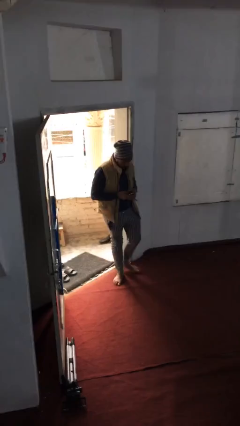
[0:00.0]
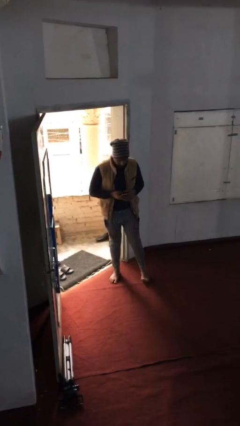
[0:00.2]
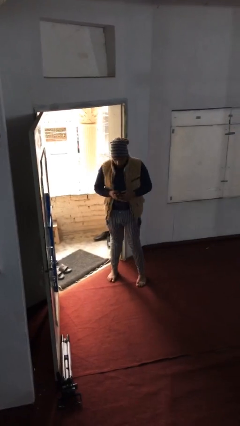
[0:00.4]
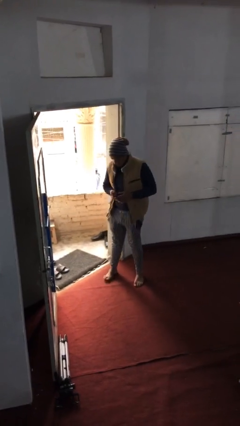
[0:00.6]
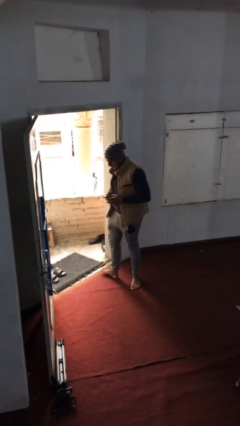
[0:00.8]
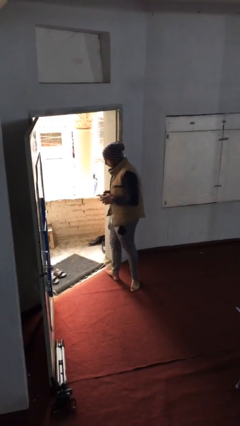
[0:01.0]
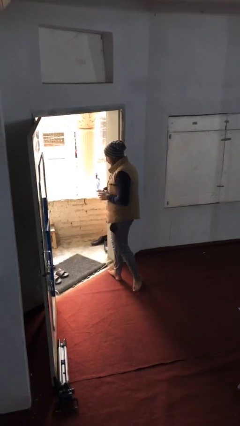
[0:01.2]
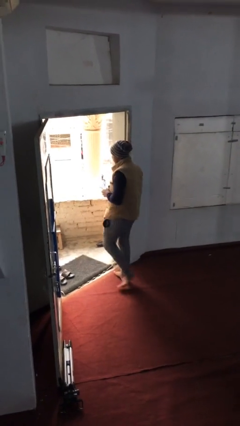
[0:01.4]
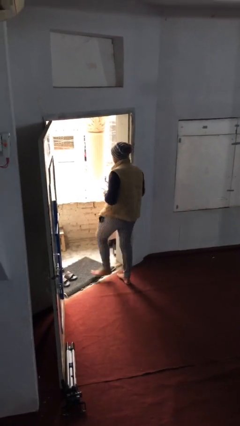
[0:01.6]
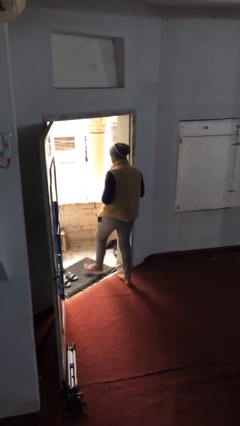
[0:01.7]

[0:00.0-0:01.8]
person exits scene through structure

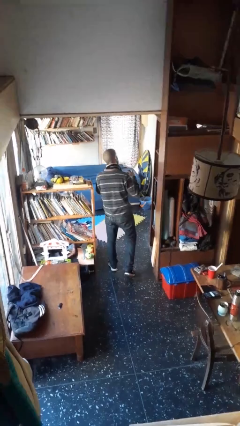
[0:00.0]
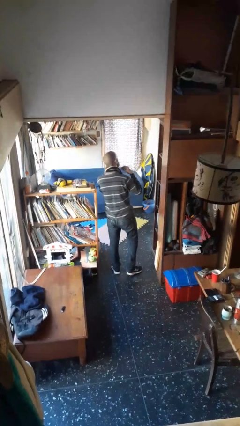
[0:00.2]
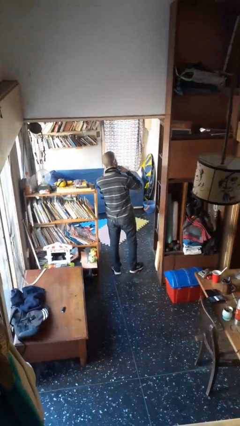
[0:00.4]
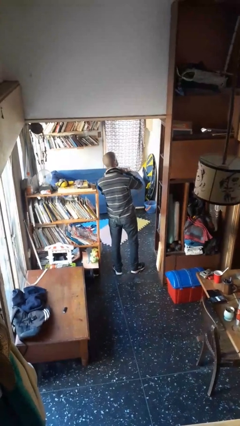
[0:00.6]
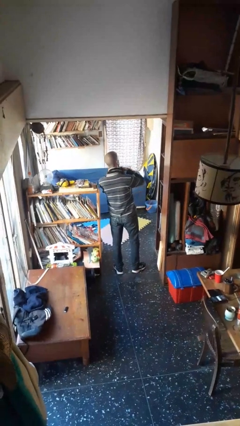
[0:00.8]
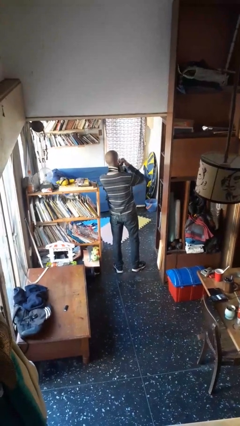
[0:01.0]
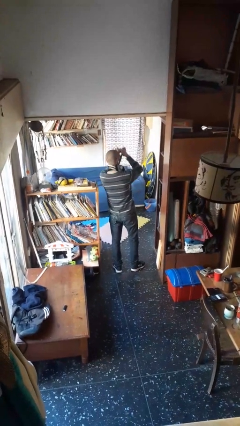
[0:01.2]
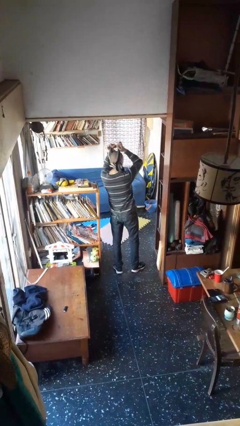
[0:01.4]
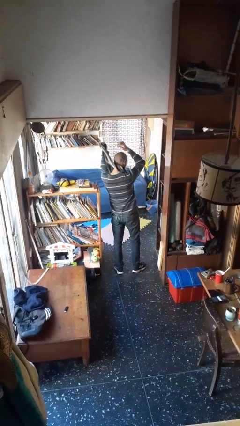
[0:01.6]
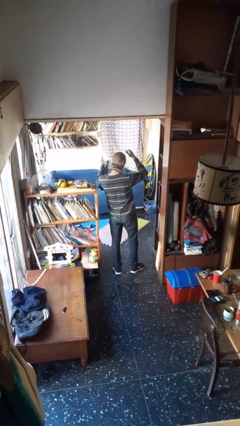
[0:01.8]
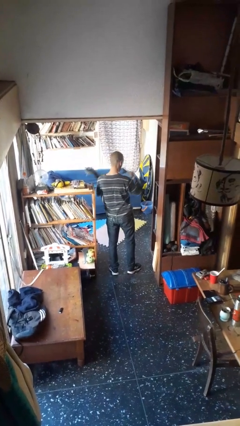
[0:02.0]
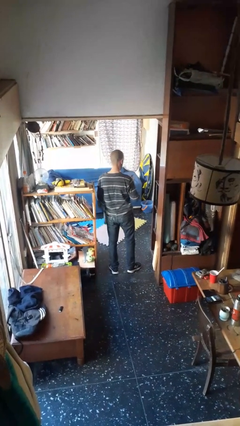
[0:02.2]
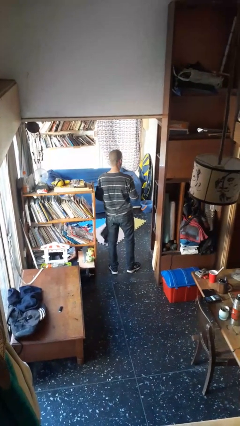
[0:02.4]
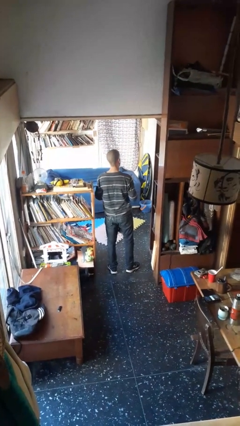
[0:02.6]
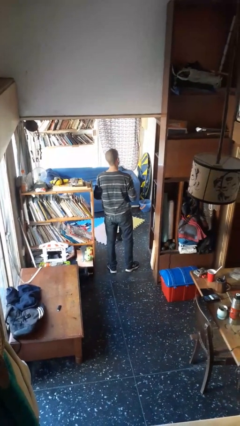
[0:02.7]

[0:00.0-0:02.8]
person takes off scarf

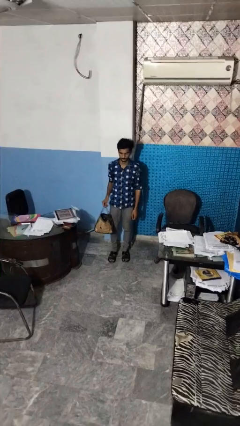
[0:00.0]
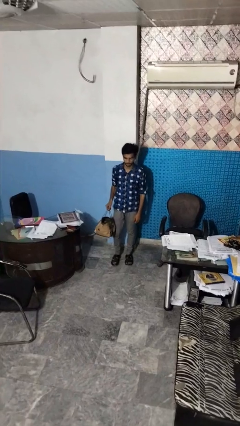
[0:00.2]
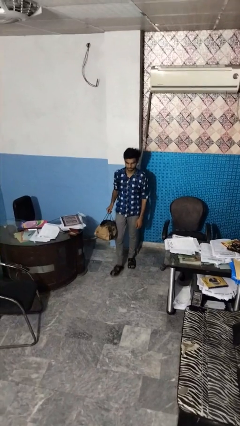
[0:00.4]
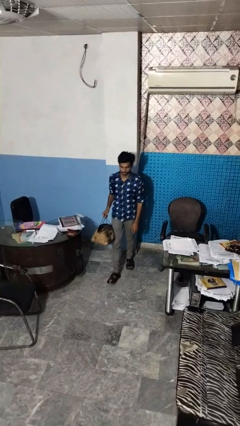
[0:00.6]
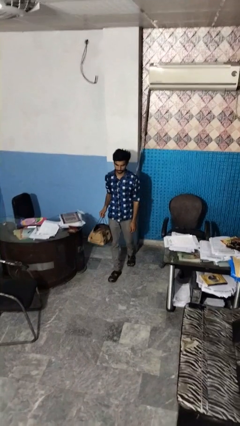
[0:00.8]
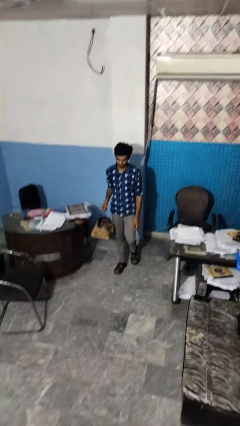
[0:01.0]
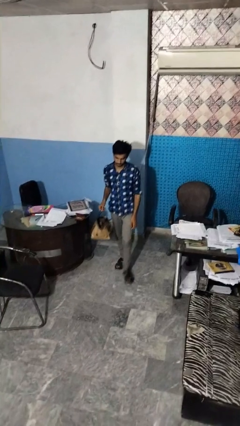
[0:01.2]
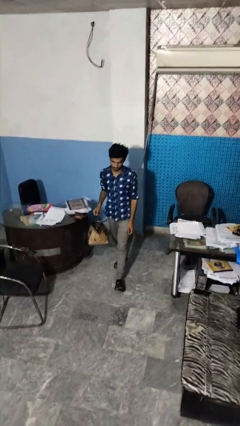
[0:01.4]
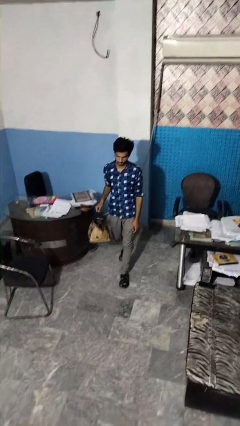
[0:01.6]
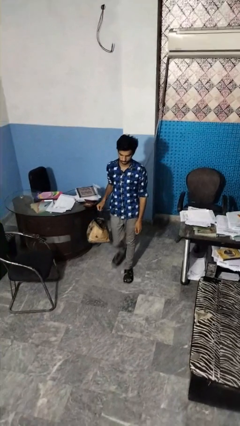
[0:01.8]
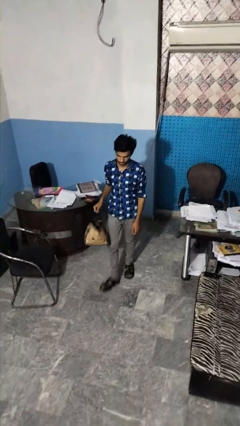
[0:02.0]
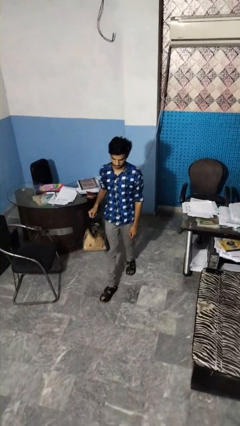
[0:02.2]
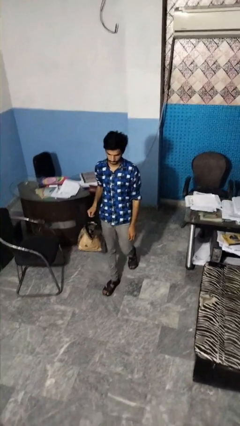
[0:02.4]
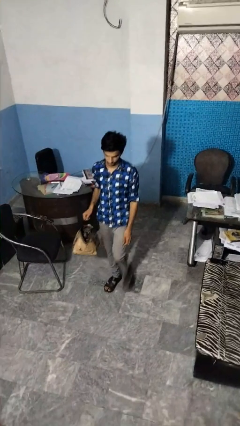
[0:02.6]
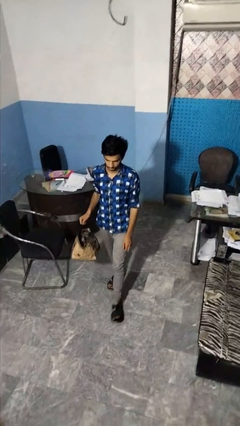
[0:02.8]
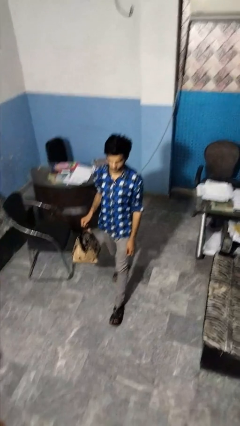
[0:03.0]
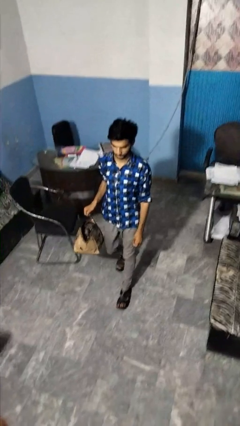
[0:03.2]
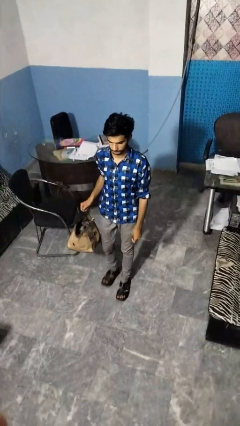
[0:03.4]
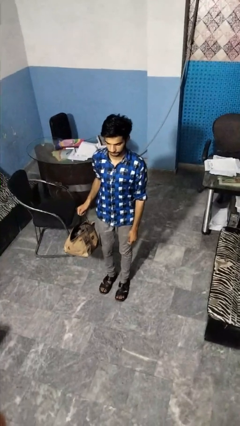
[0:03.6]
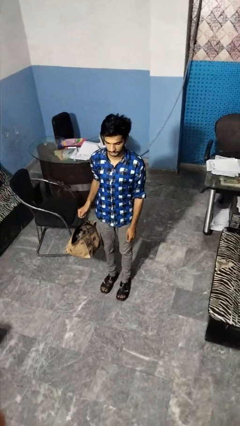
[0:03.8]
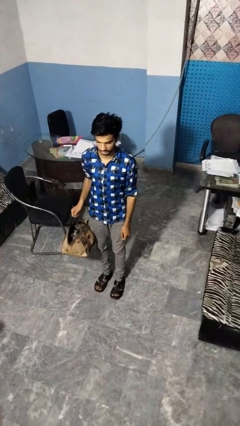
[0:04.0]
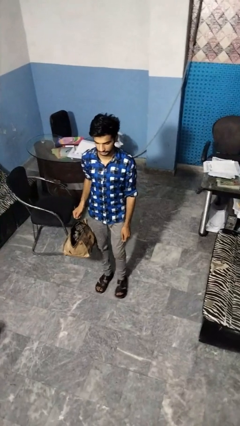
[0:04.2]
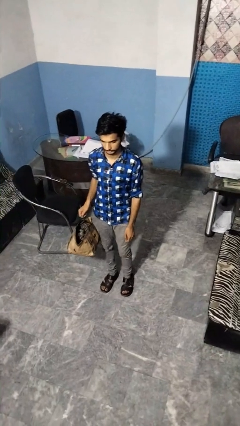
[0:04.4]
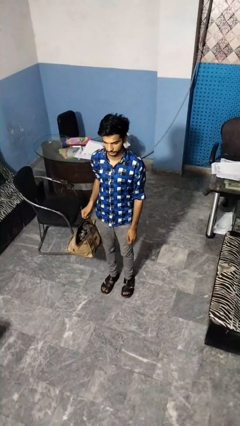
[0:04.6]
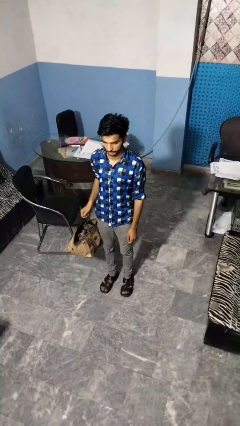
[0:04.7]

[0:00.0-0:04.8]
person carries groceries

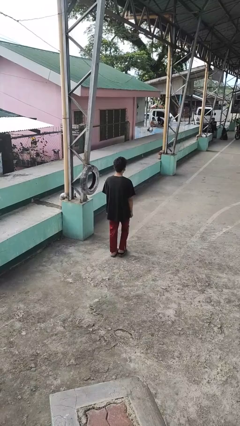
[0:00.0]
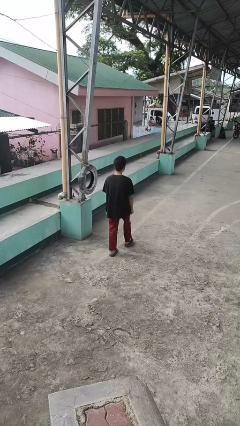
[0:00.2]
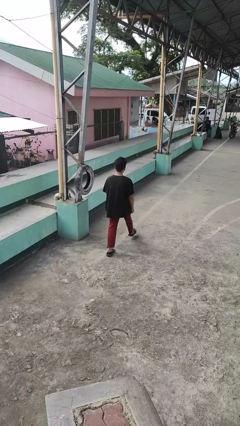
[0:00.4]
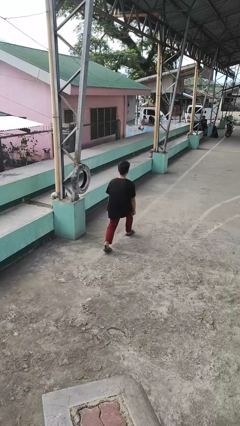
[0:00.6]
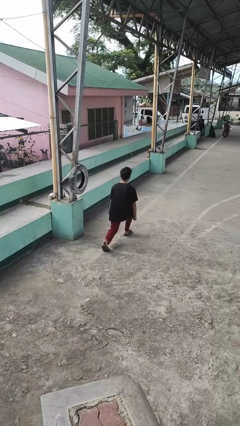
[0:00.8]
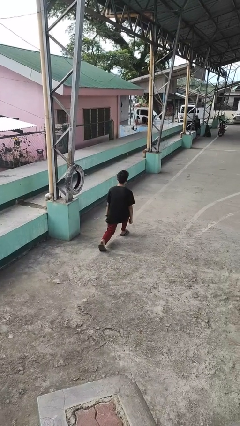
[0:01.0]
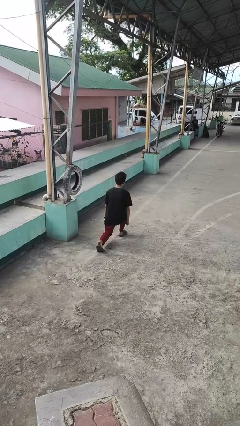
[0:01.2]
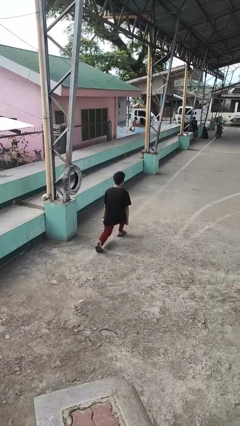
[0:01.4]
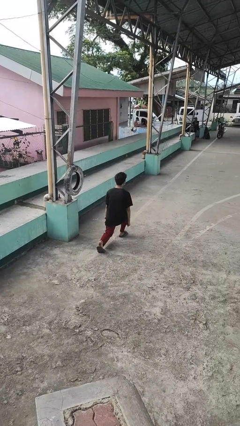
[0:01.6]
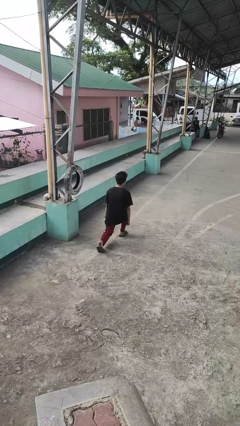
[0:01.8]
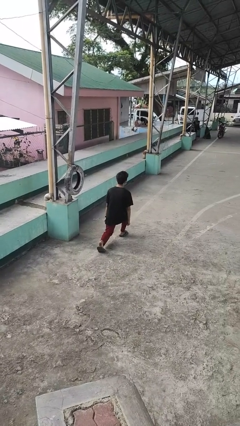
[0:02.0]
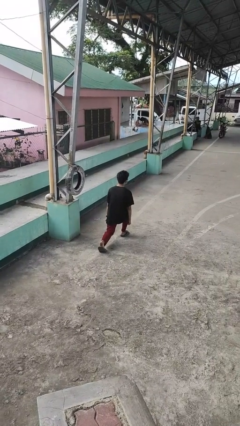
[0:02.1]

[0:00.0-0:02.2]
person exercises with lunges

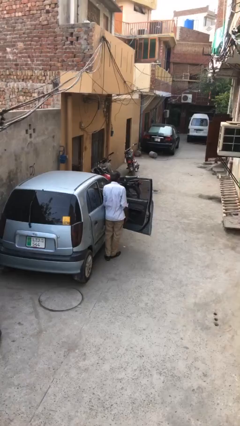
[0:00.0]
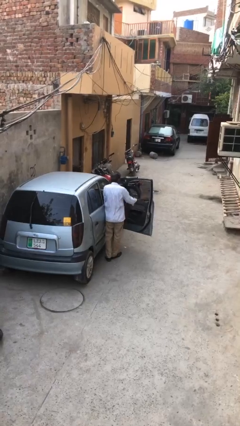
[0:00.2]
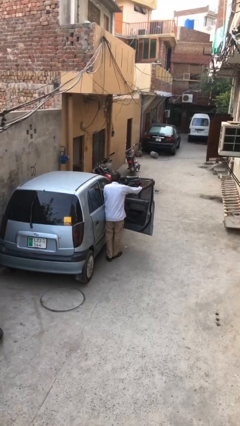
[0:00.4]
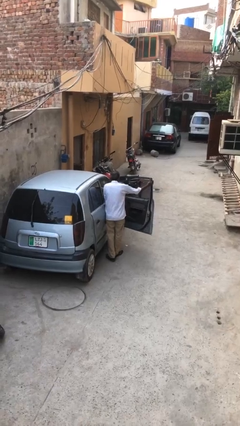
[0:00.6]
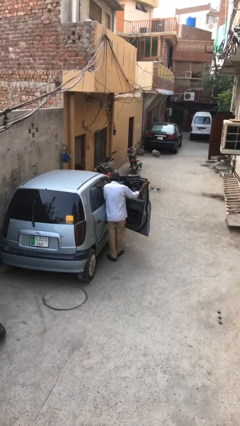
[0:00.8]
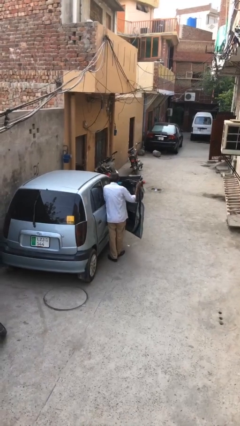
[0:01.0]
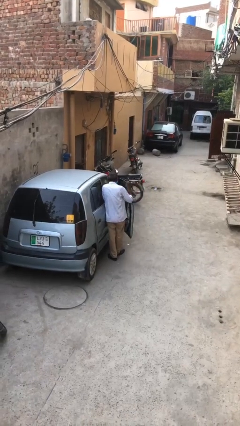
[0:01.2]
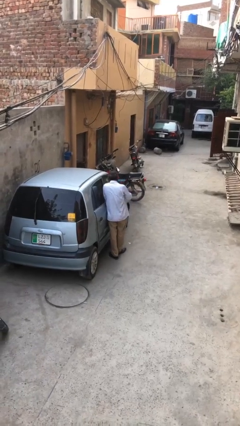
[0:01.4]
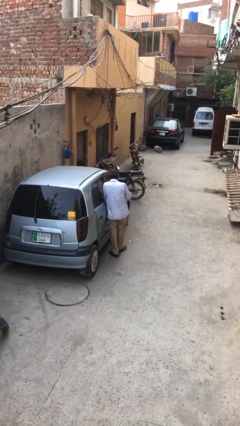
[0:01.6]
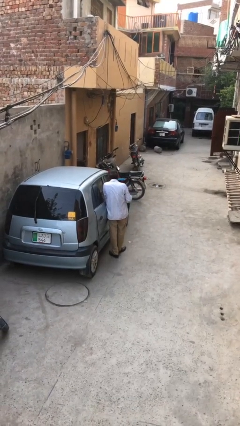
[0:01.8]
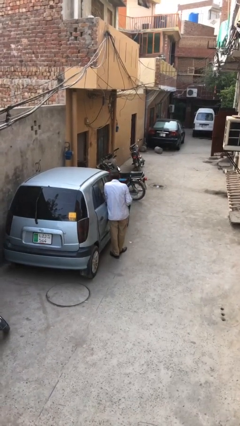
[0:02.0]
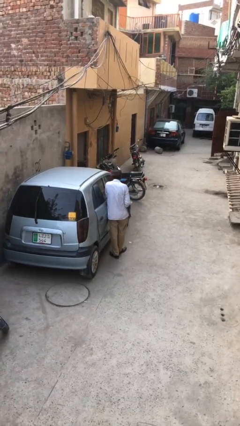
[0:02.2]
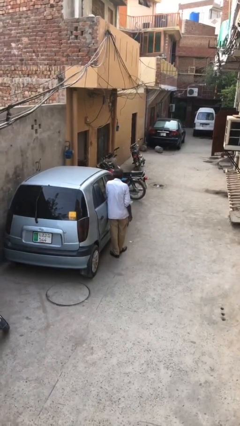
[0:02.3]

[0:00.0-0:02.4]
person closes car door

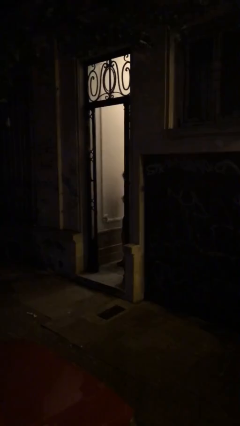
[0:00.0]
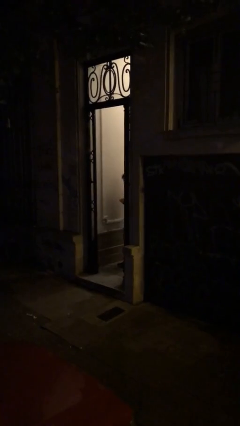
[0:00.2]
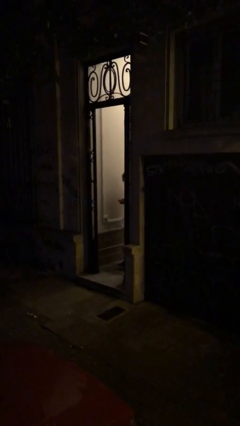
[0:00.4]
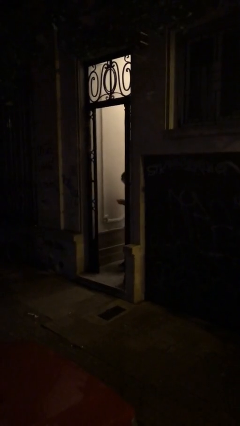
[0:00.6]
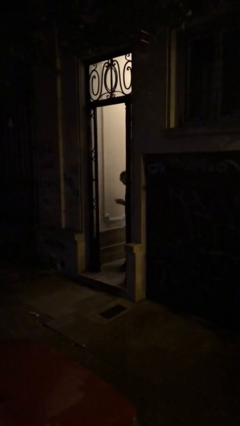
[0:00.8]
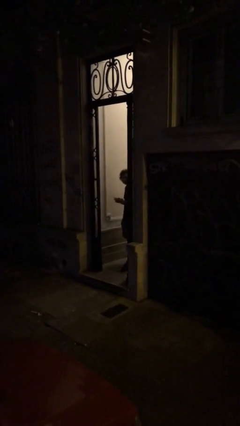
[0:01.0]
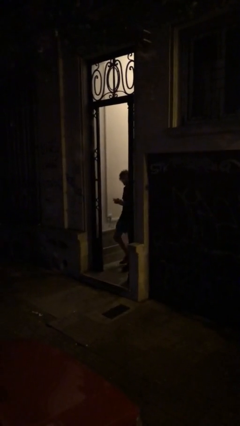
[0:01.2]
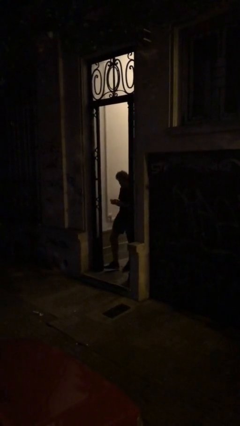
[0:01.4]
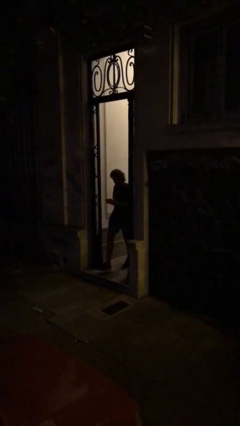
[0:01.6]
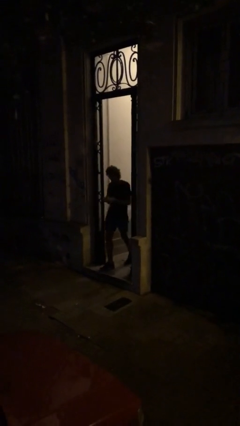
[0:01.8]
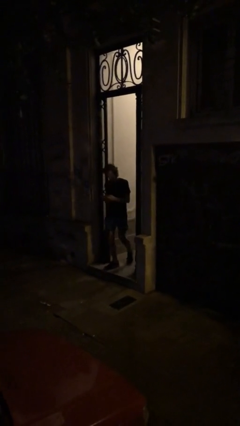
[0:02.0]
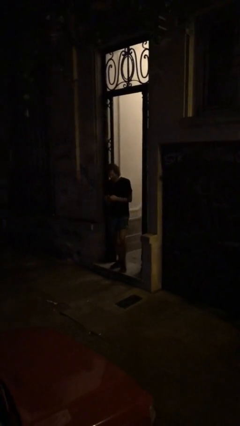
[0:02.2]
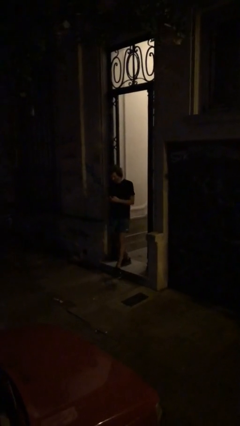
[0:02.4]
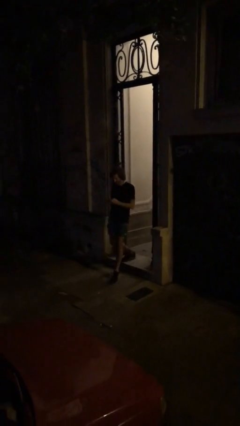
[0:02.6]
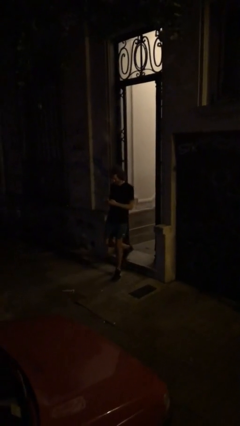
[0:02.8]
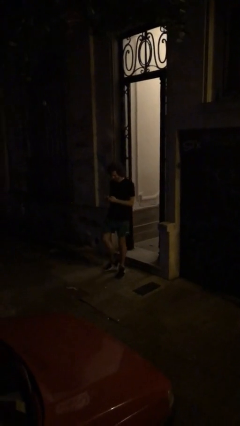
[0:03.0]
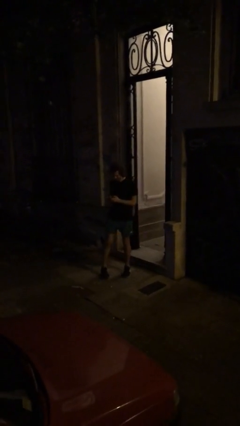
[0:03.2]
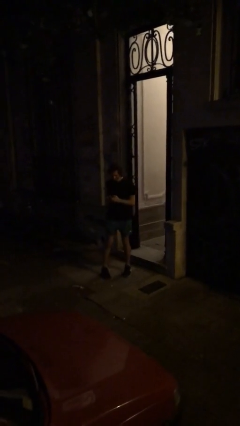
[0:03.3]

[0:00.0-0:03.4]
person enters scene through structure
